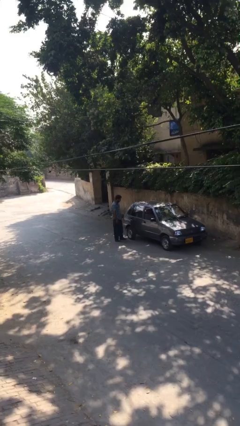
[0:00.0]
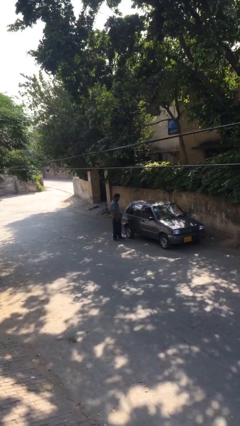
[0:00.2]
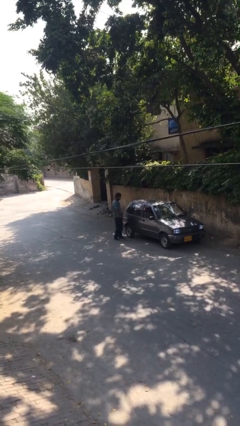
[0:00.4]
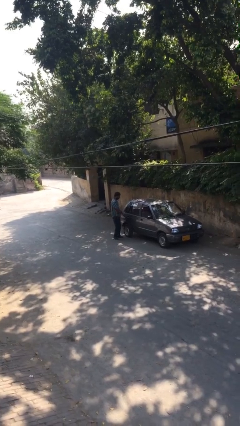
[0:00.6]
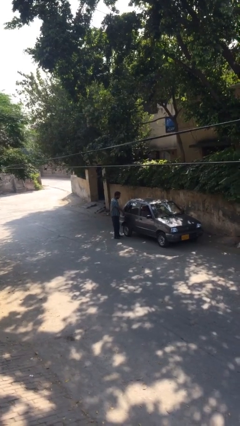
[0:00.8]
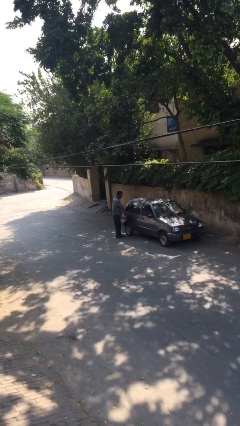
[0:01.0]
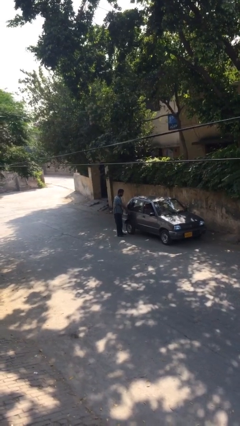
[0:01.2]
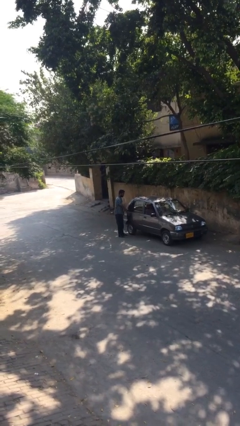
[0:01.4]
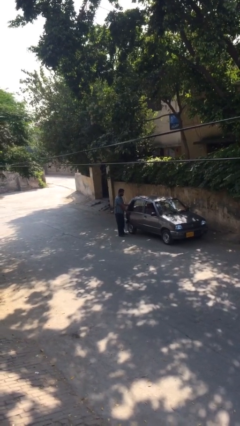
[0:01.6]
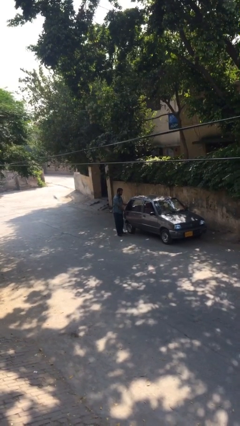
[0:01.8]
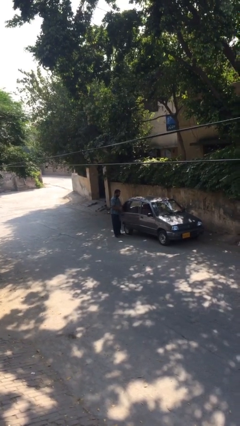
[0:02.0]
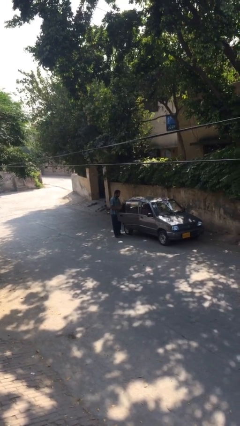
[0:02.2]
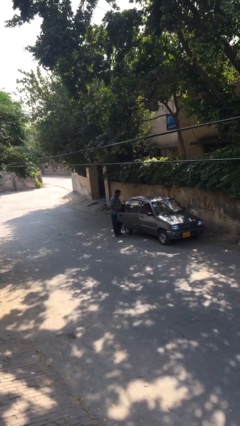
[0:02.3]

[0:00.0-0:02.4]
person opens car door

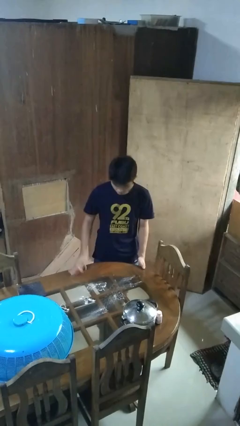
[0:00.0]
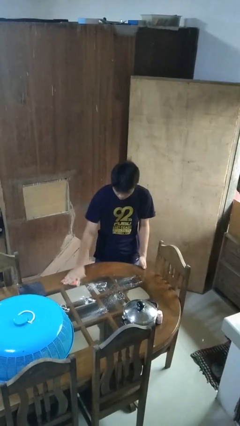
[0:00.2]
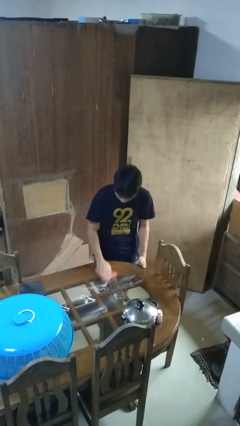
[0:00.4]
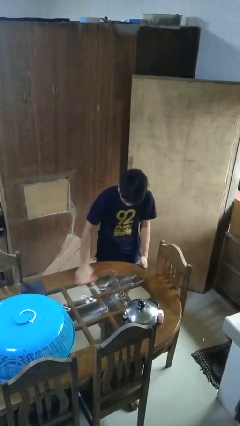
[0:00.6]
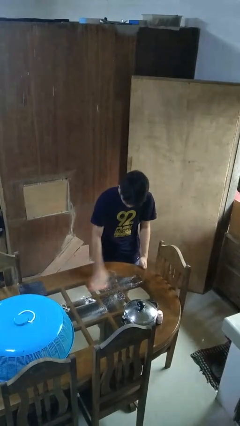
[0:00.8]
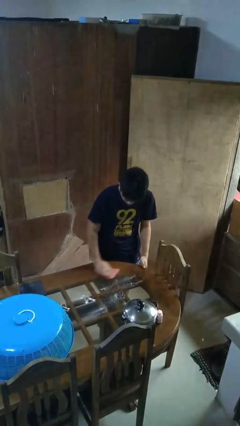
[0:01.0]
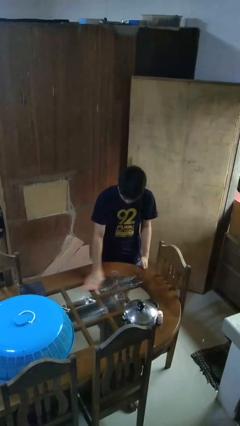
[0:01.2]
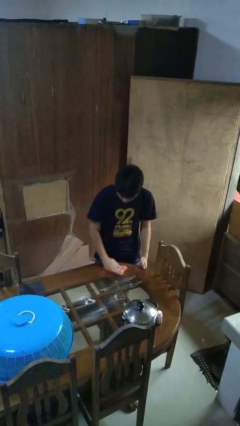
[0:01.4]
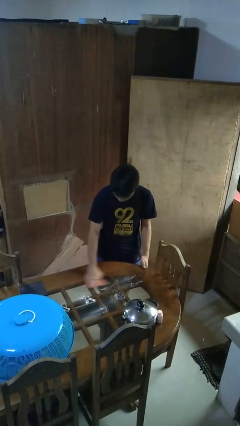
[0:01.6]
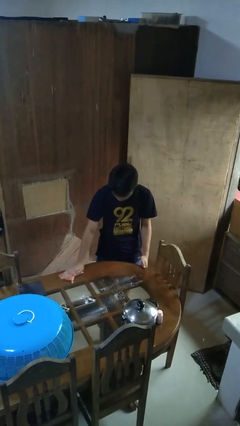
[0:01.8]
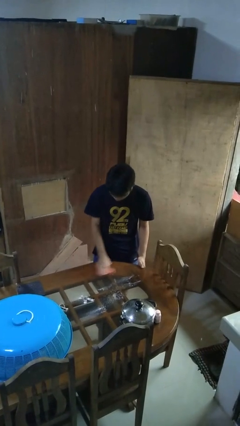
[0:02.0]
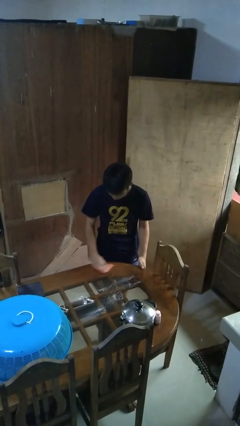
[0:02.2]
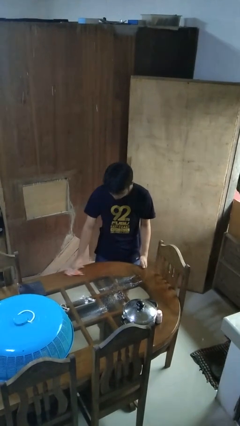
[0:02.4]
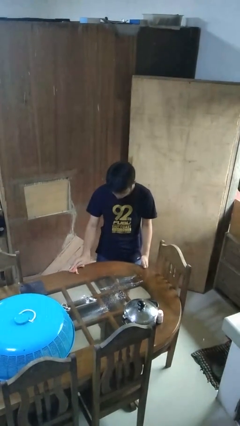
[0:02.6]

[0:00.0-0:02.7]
person cleans table with rag

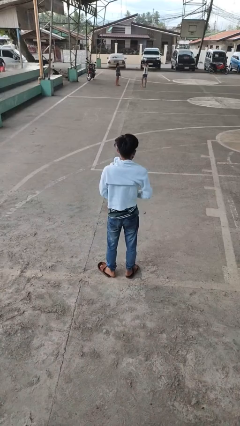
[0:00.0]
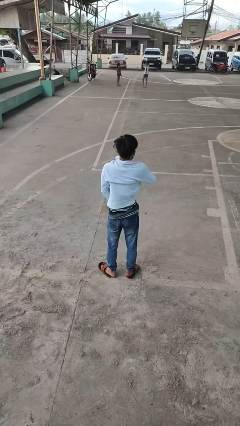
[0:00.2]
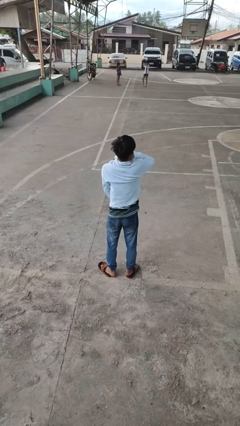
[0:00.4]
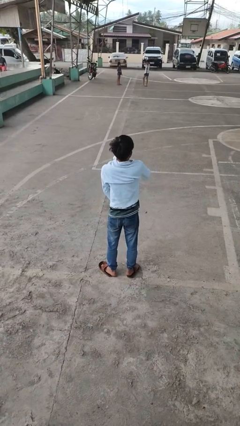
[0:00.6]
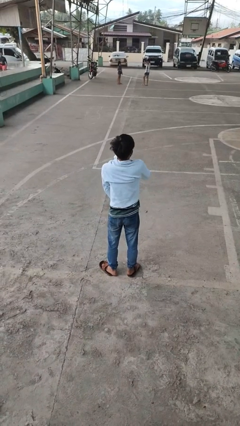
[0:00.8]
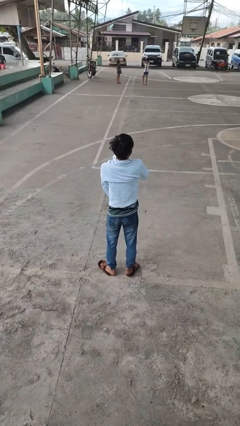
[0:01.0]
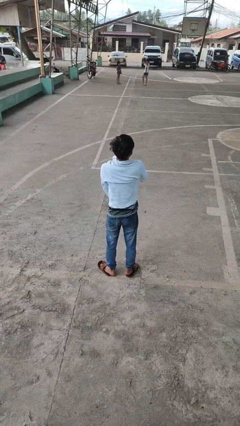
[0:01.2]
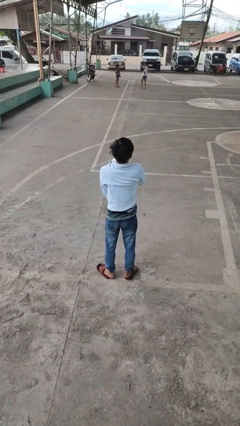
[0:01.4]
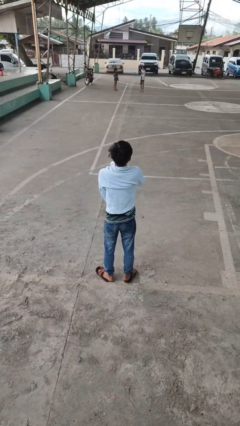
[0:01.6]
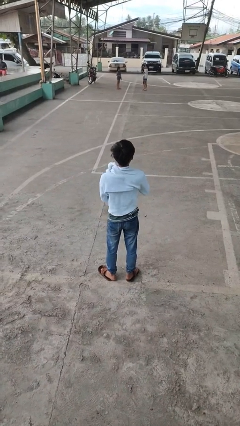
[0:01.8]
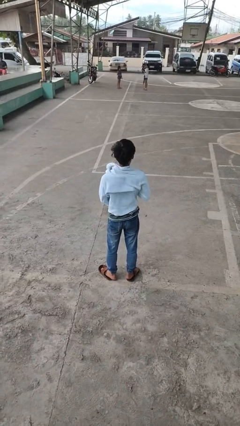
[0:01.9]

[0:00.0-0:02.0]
person zips up jacket

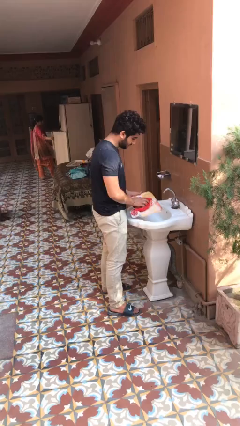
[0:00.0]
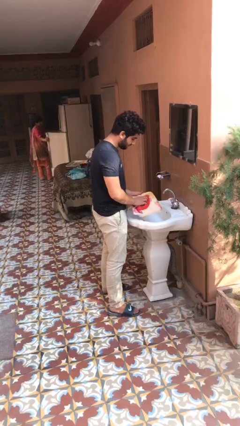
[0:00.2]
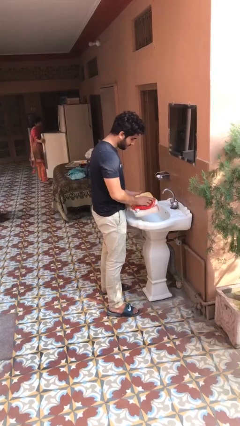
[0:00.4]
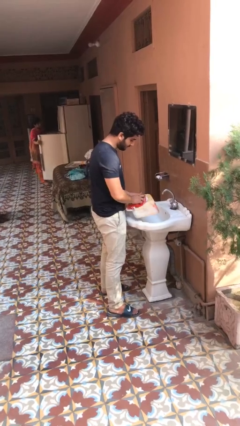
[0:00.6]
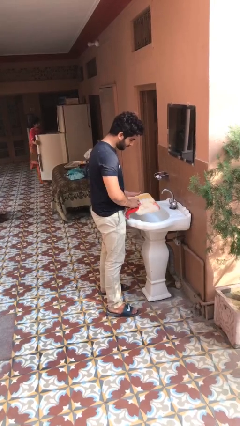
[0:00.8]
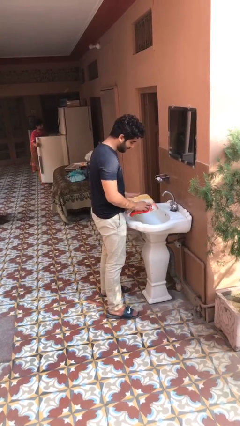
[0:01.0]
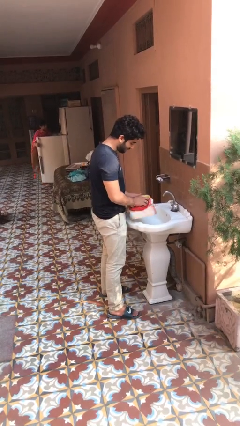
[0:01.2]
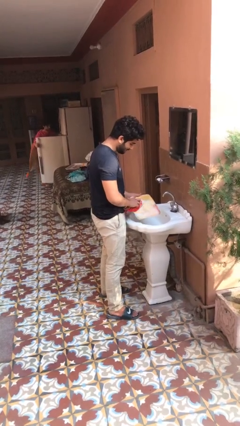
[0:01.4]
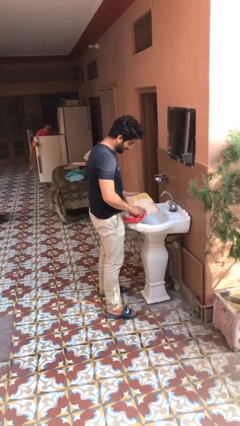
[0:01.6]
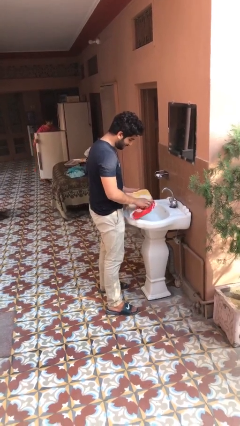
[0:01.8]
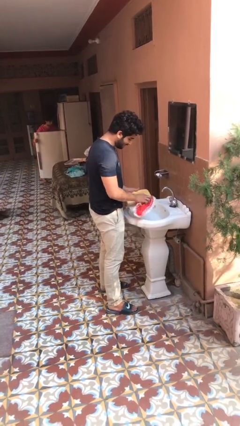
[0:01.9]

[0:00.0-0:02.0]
person dries dish

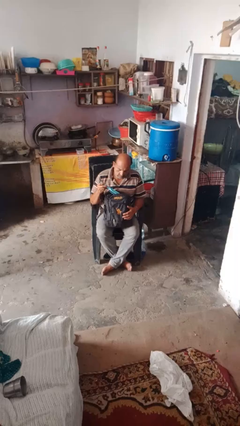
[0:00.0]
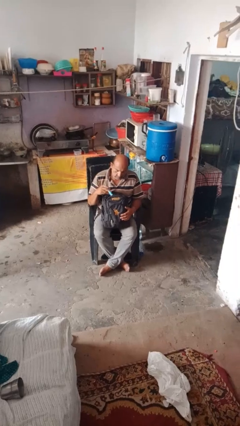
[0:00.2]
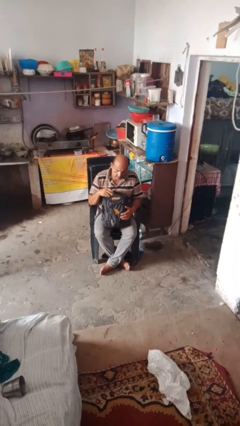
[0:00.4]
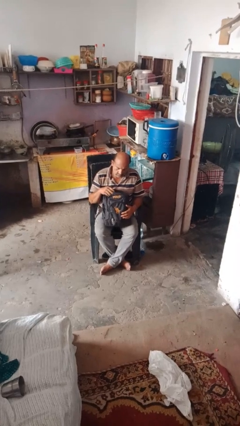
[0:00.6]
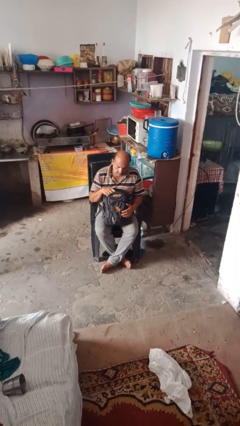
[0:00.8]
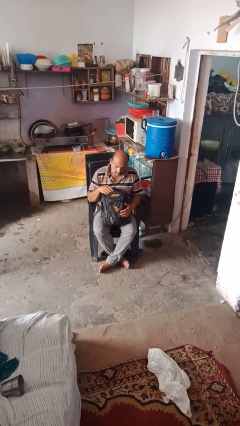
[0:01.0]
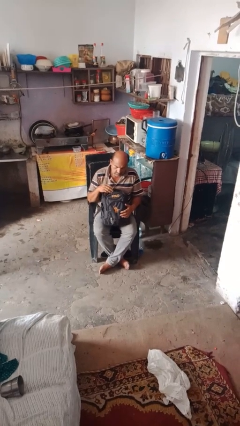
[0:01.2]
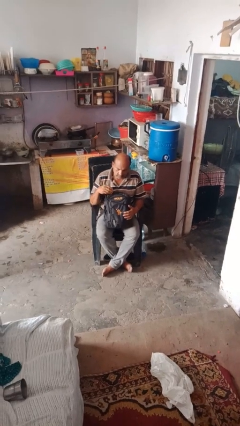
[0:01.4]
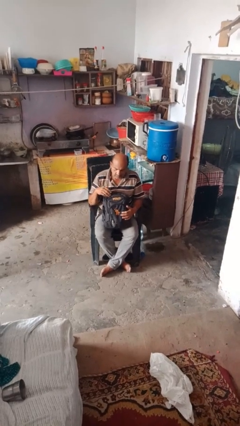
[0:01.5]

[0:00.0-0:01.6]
person puts object into backpack

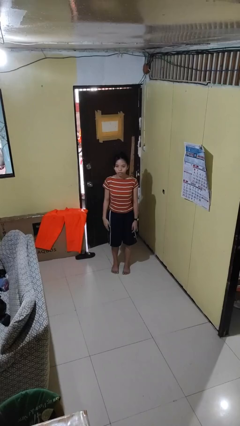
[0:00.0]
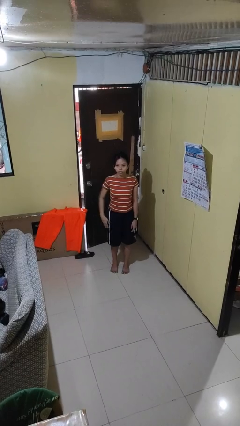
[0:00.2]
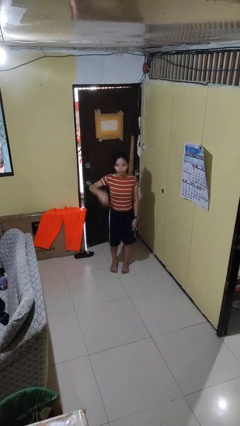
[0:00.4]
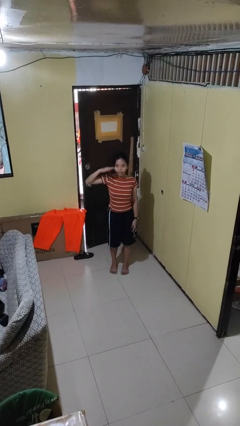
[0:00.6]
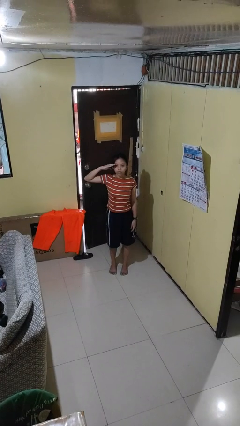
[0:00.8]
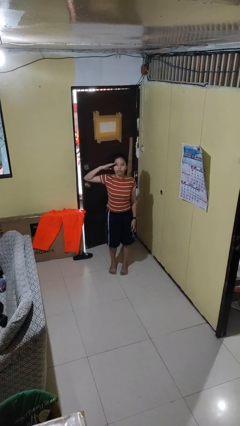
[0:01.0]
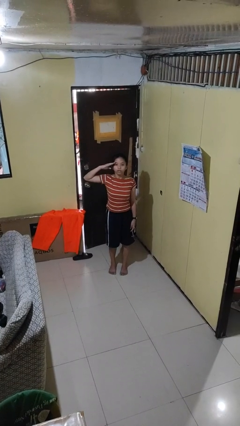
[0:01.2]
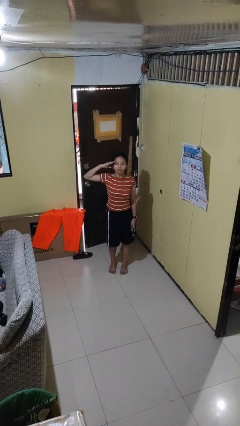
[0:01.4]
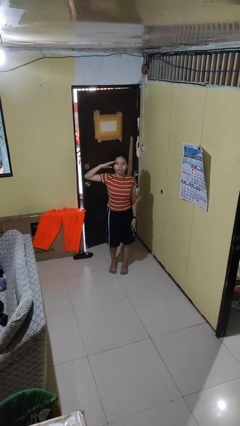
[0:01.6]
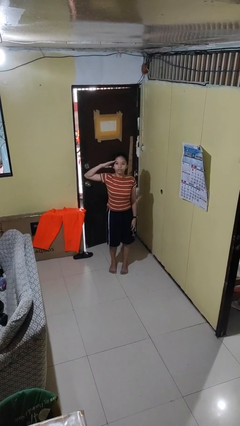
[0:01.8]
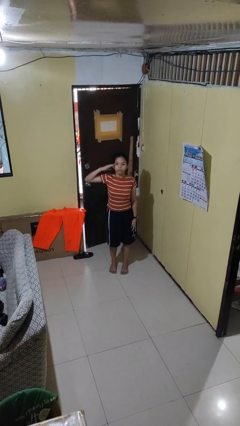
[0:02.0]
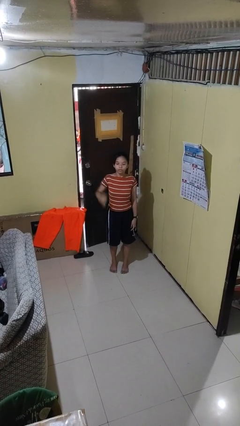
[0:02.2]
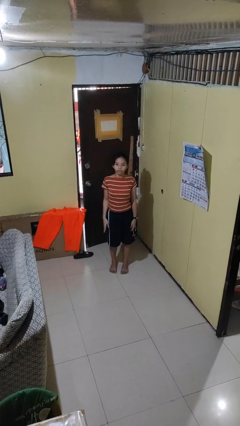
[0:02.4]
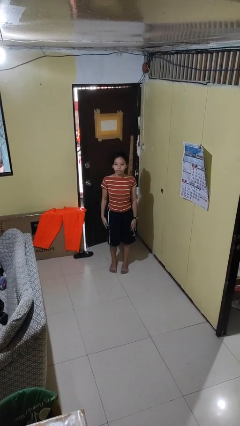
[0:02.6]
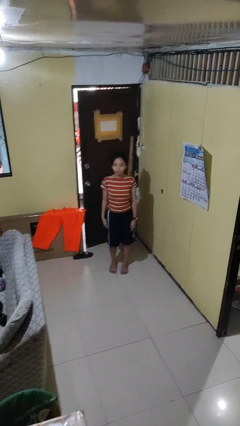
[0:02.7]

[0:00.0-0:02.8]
person salutes

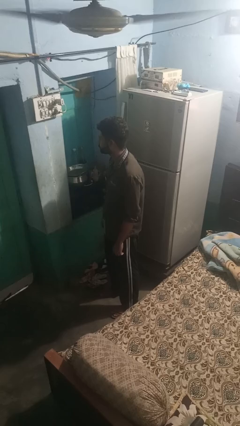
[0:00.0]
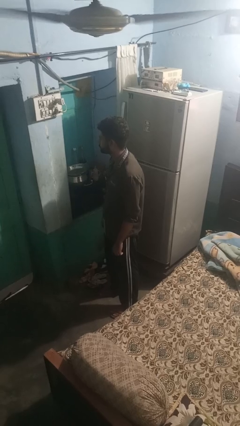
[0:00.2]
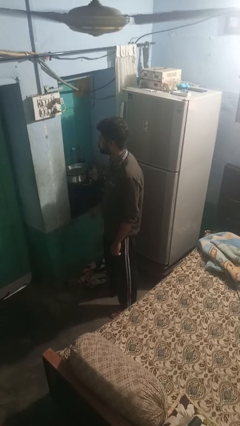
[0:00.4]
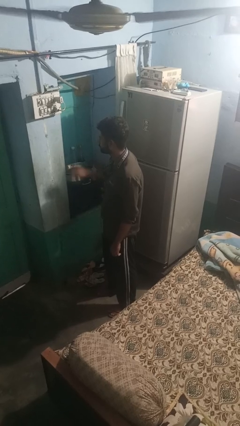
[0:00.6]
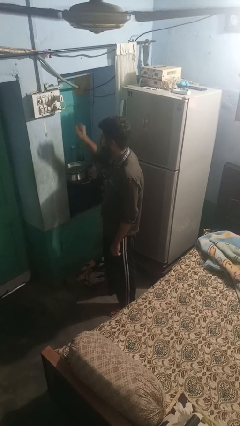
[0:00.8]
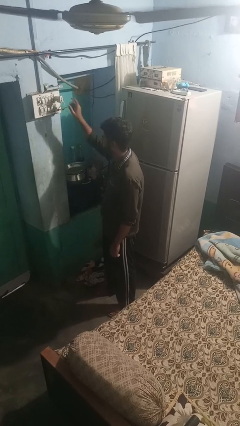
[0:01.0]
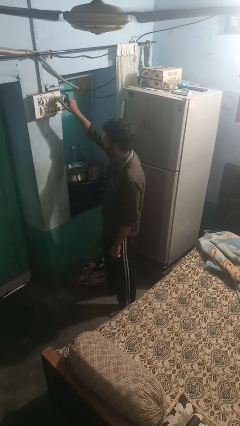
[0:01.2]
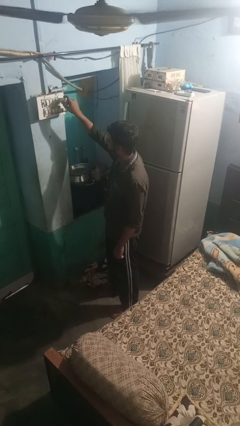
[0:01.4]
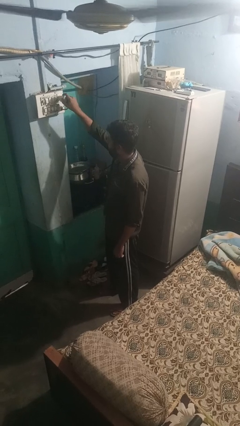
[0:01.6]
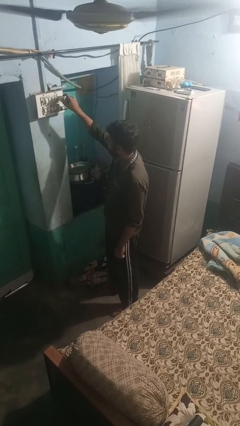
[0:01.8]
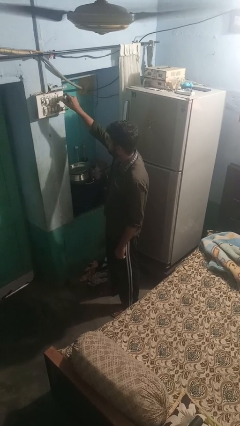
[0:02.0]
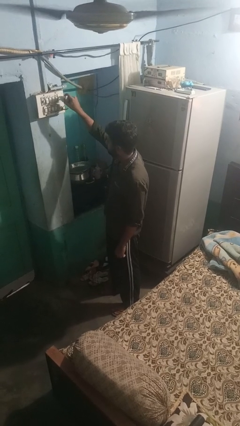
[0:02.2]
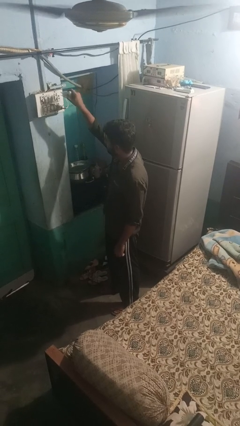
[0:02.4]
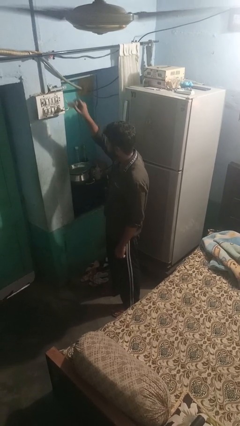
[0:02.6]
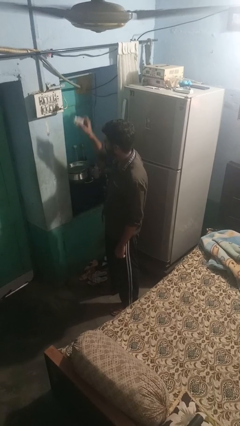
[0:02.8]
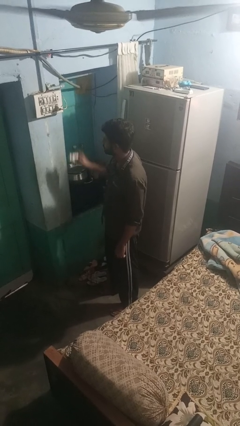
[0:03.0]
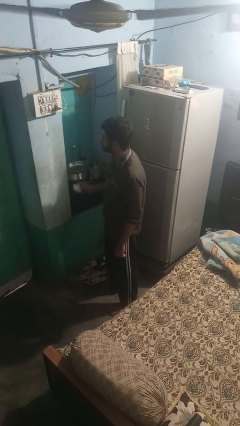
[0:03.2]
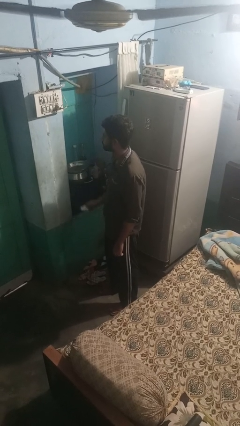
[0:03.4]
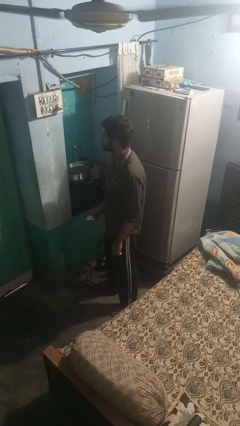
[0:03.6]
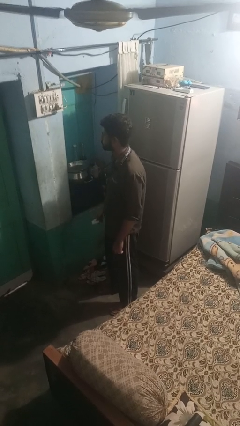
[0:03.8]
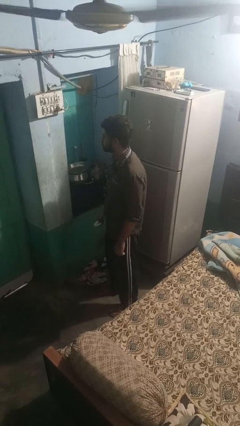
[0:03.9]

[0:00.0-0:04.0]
person unplugs from electrical socket
